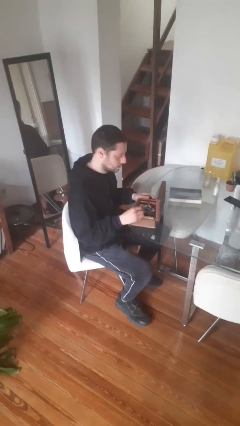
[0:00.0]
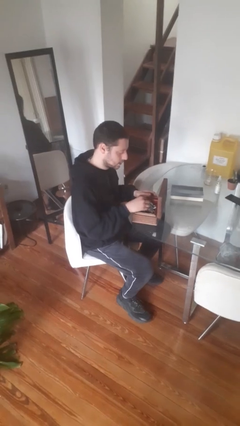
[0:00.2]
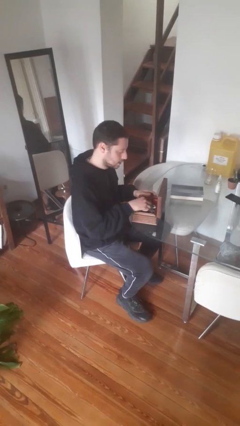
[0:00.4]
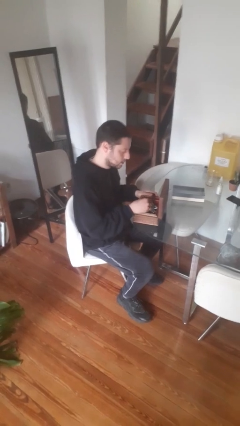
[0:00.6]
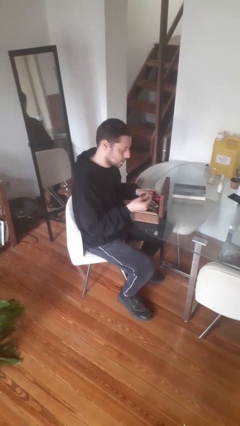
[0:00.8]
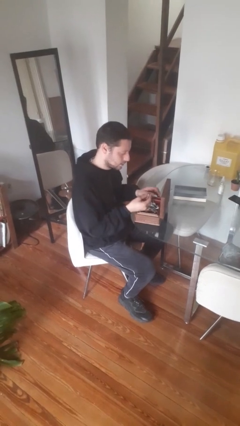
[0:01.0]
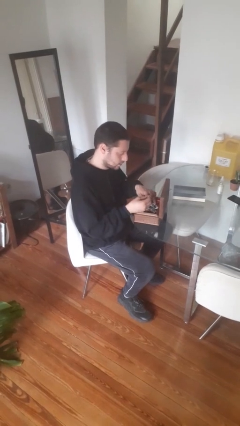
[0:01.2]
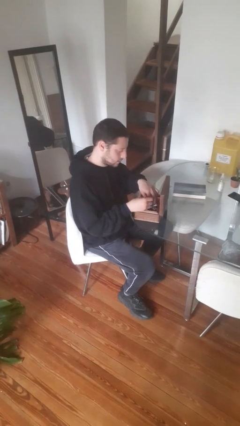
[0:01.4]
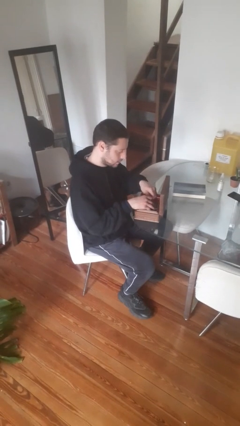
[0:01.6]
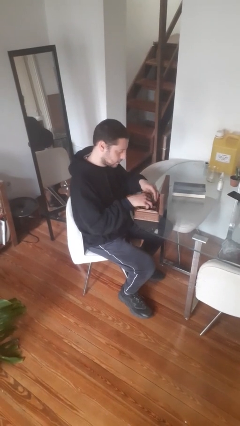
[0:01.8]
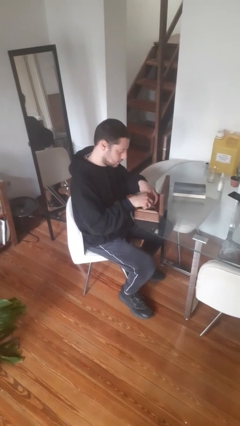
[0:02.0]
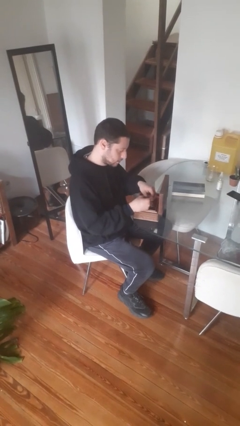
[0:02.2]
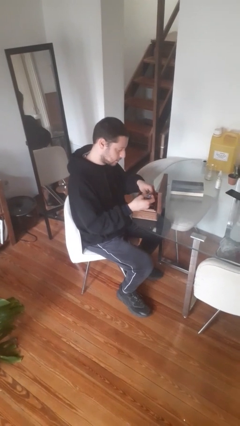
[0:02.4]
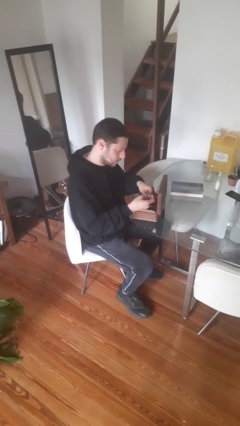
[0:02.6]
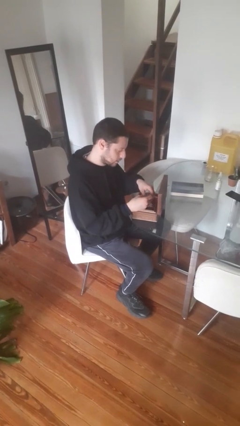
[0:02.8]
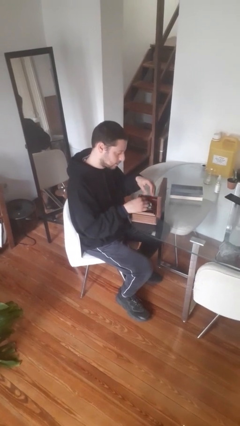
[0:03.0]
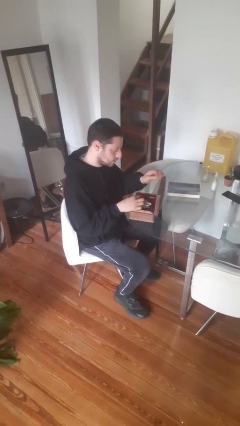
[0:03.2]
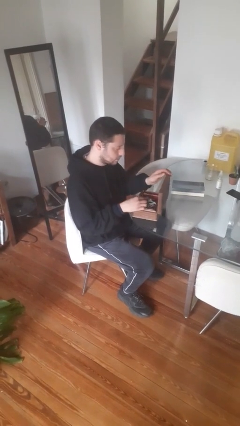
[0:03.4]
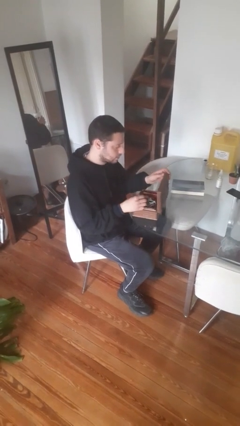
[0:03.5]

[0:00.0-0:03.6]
person searches jewelry box

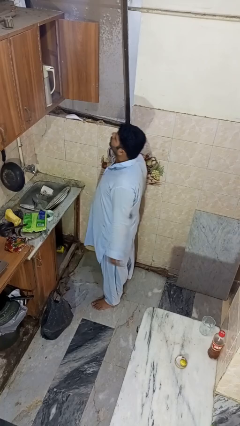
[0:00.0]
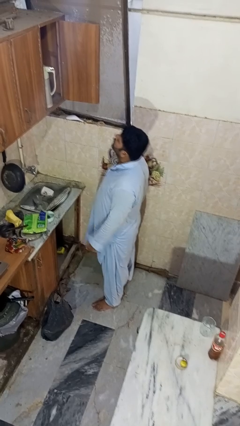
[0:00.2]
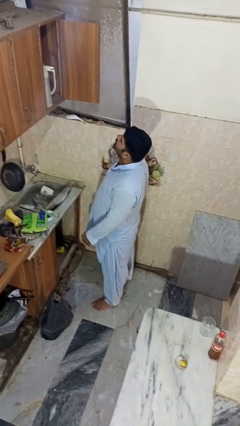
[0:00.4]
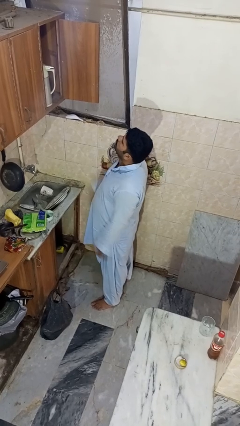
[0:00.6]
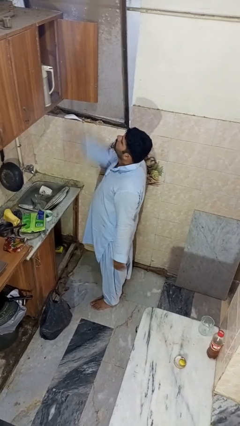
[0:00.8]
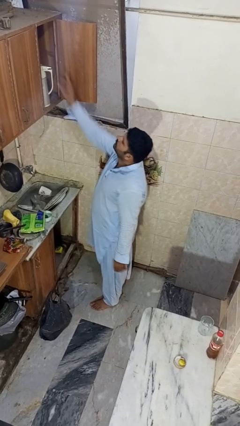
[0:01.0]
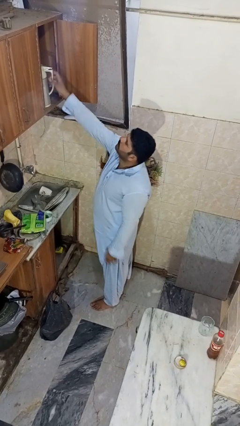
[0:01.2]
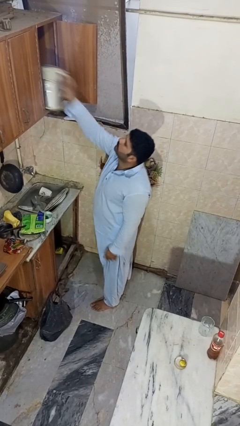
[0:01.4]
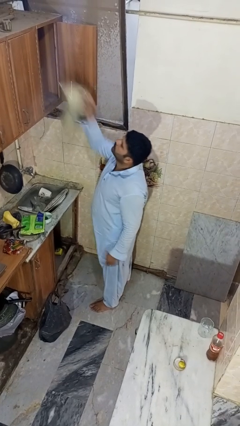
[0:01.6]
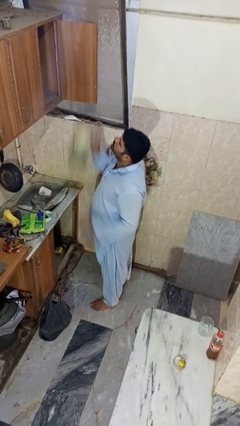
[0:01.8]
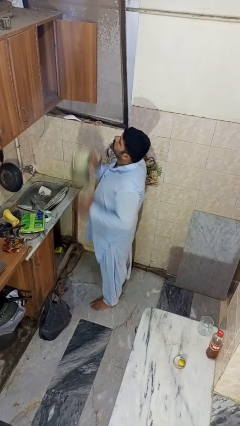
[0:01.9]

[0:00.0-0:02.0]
person takes object from cabinet

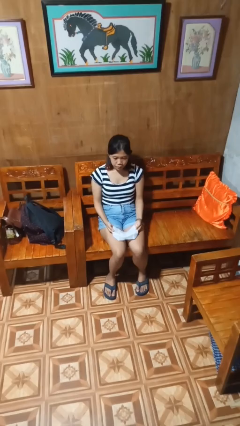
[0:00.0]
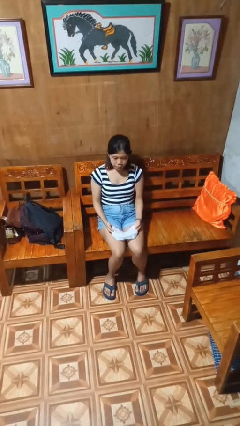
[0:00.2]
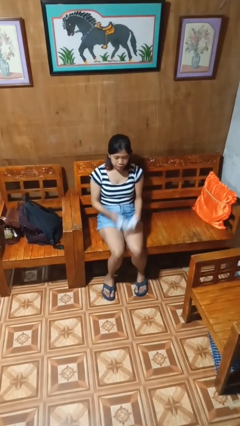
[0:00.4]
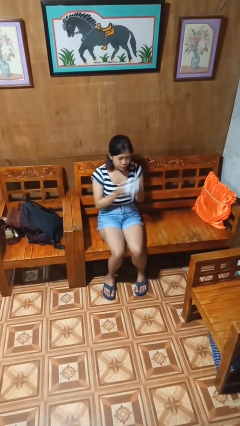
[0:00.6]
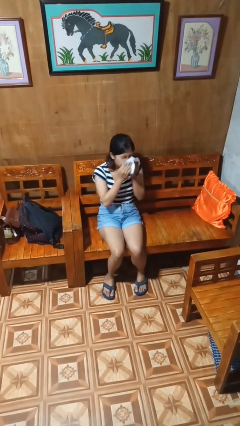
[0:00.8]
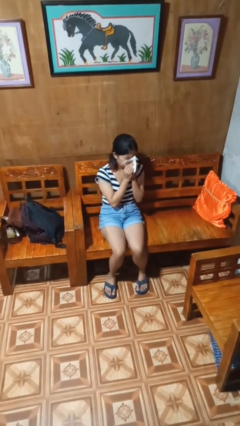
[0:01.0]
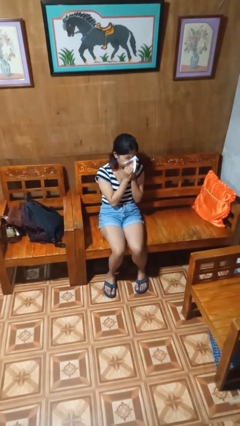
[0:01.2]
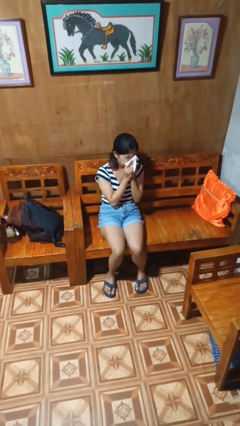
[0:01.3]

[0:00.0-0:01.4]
person blows nose

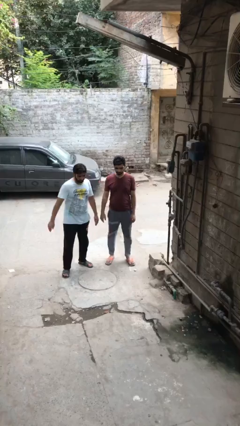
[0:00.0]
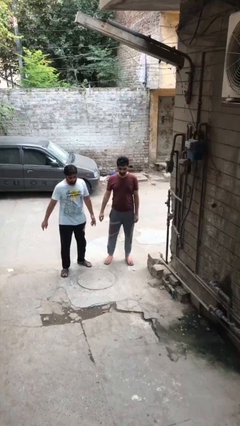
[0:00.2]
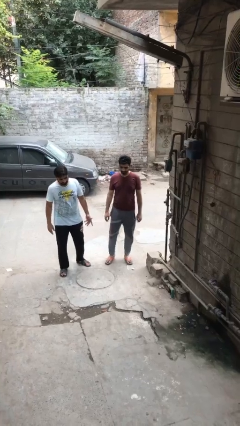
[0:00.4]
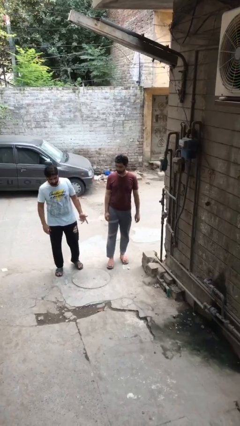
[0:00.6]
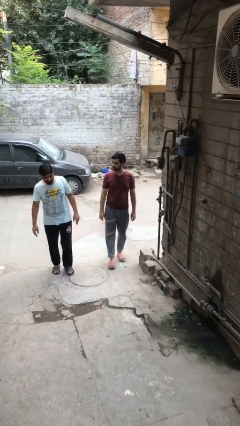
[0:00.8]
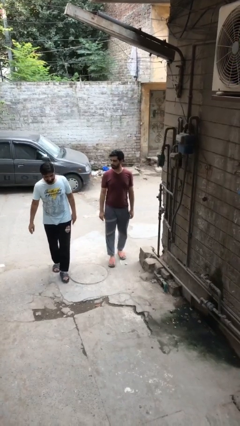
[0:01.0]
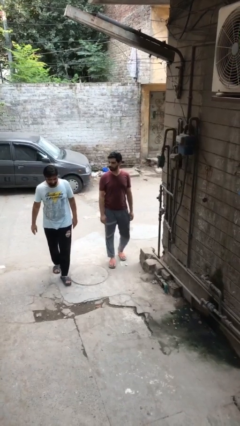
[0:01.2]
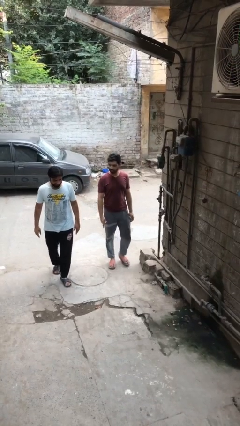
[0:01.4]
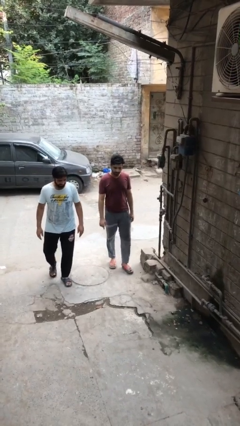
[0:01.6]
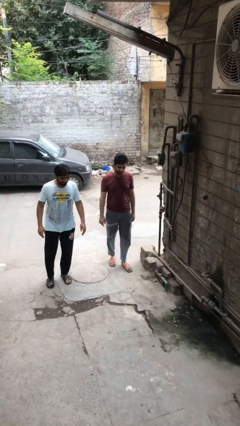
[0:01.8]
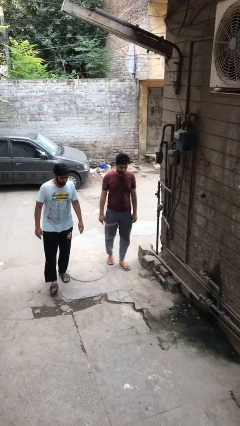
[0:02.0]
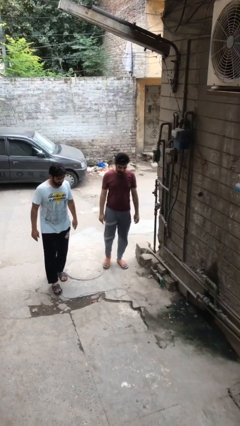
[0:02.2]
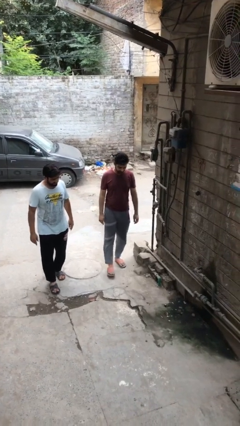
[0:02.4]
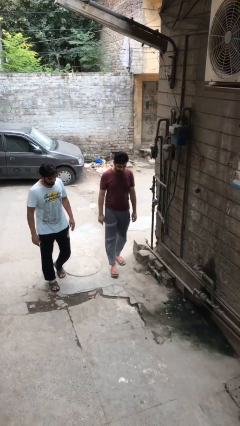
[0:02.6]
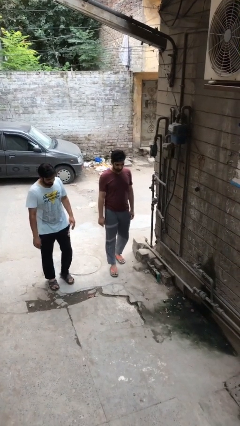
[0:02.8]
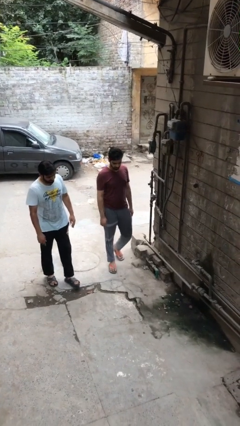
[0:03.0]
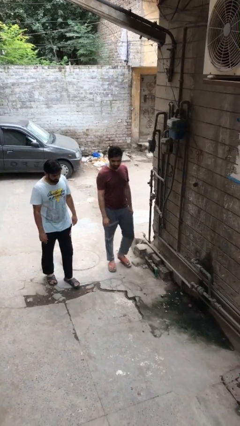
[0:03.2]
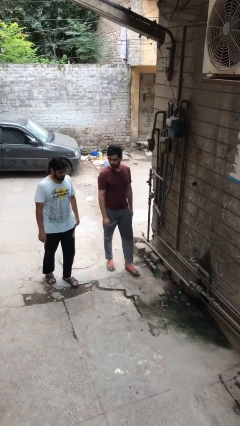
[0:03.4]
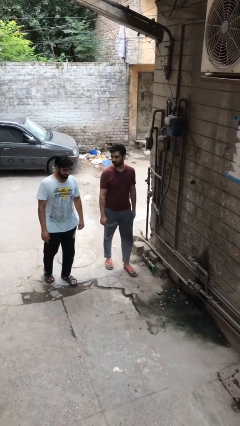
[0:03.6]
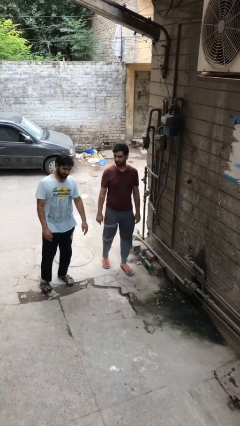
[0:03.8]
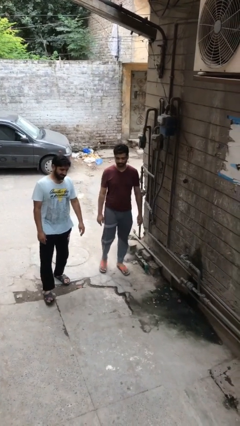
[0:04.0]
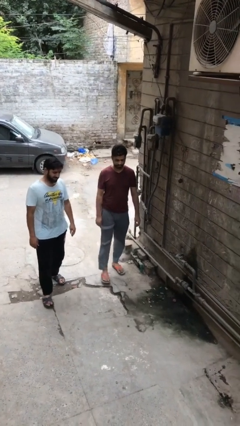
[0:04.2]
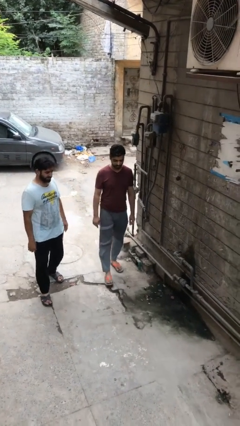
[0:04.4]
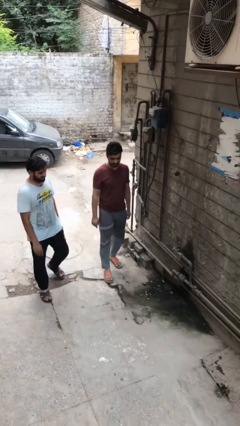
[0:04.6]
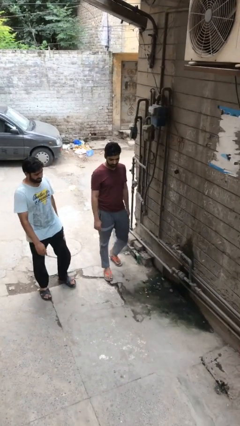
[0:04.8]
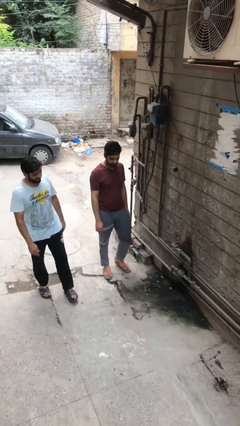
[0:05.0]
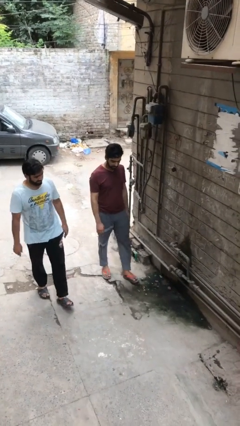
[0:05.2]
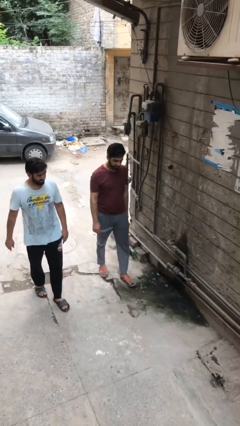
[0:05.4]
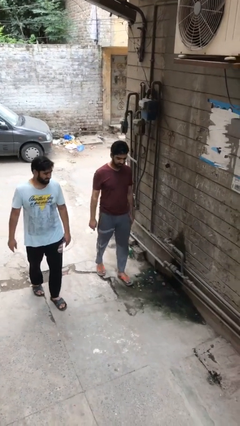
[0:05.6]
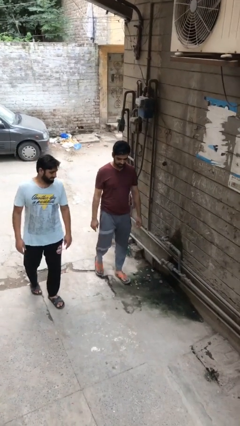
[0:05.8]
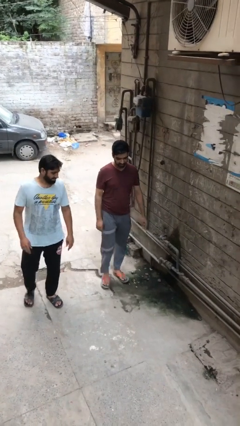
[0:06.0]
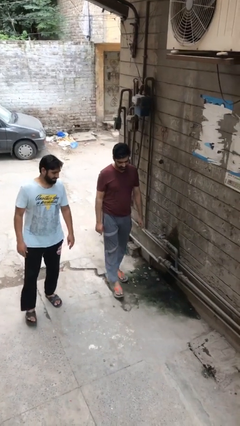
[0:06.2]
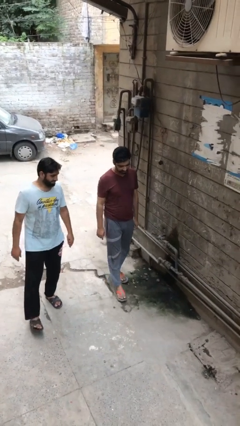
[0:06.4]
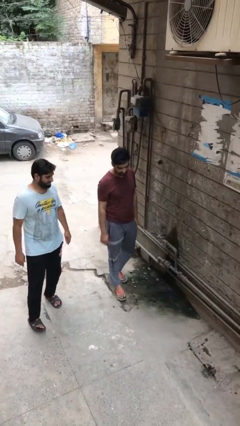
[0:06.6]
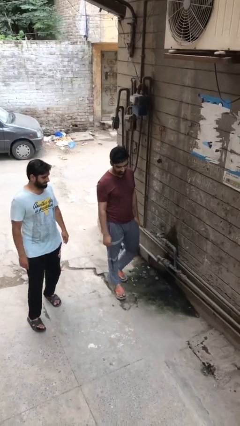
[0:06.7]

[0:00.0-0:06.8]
person talks to person

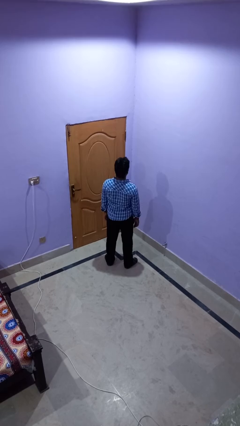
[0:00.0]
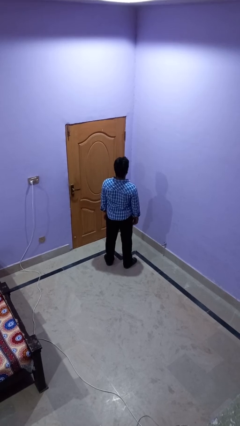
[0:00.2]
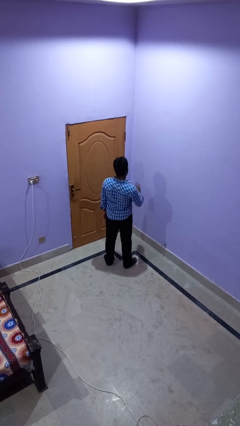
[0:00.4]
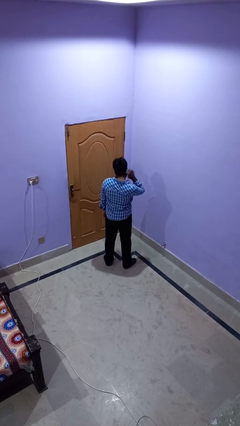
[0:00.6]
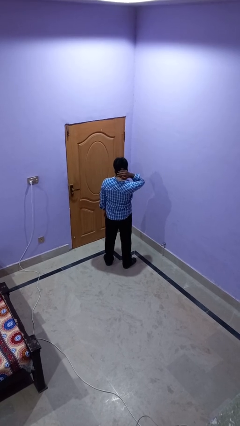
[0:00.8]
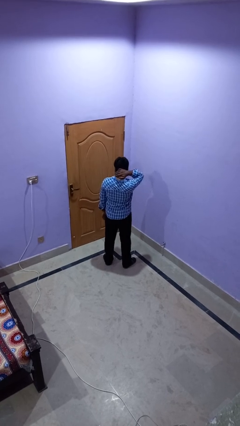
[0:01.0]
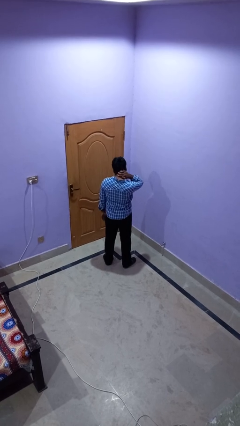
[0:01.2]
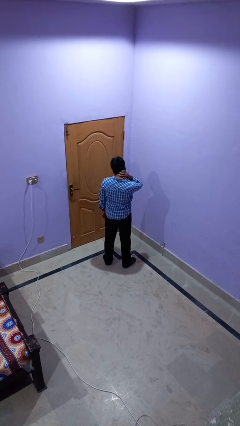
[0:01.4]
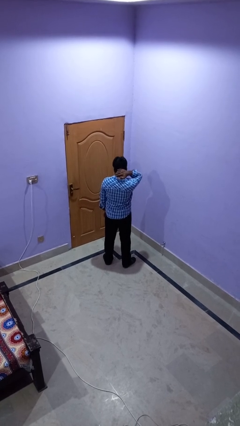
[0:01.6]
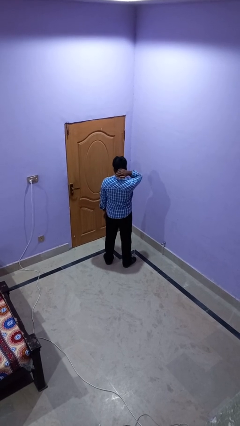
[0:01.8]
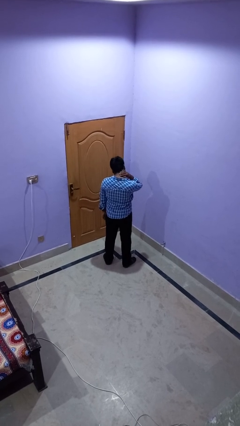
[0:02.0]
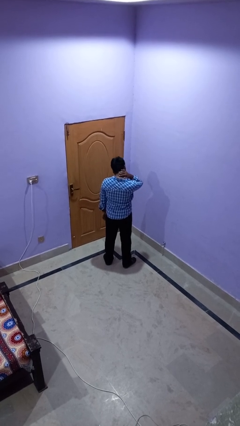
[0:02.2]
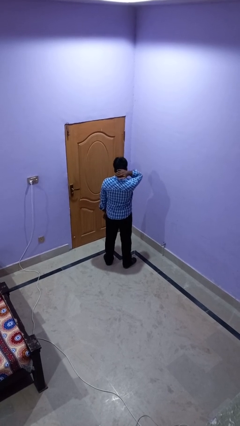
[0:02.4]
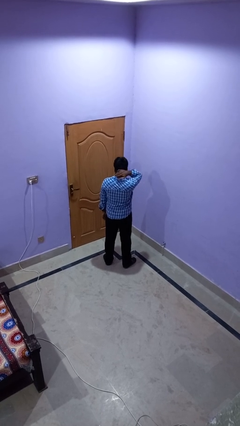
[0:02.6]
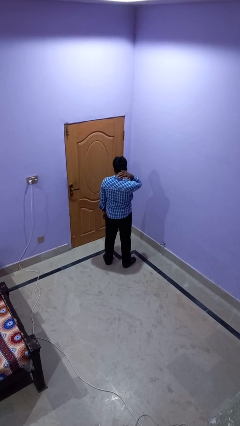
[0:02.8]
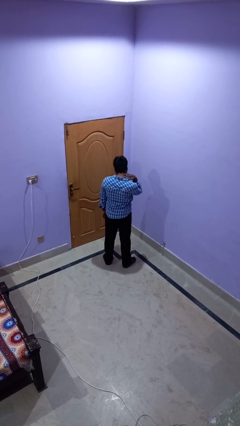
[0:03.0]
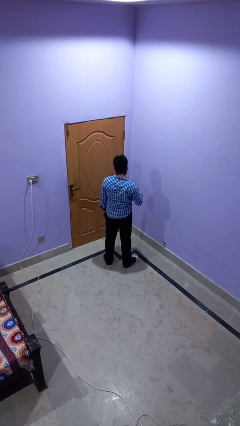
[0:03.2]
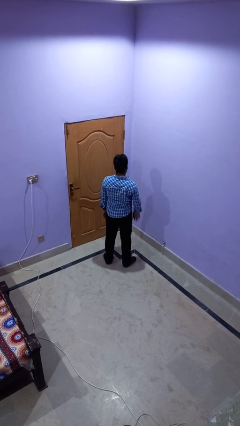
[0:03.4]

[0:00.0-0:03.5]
person rubs neck
